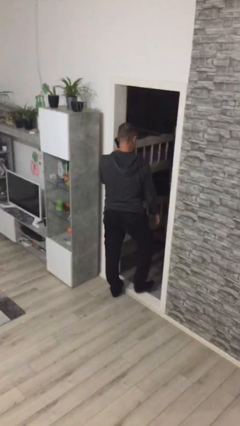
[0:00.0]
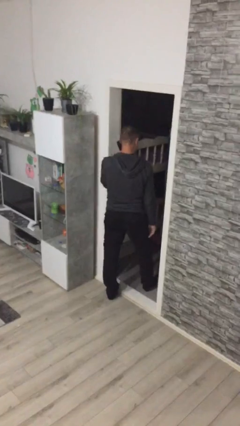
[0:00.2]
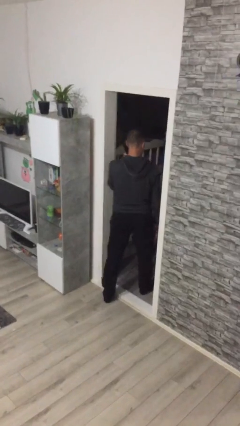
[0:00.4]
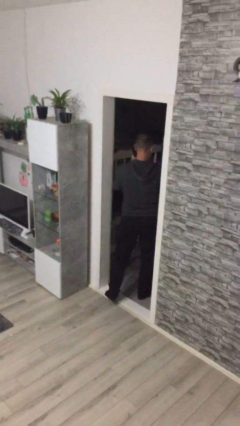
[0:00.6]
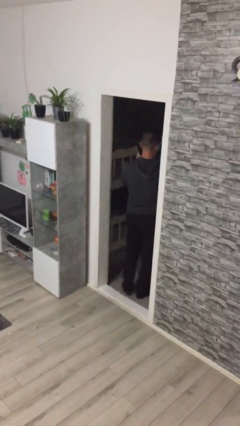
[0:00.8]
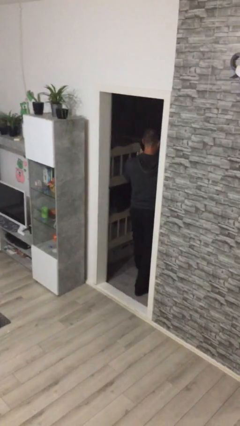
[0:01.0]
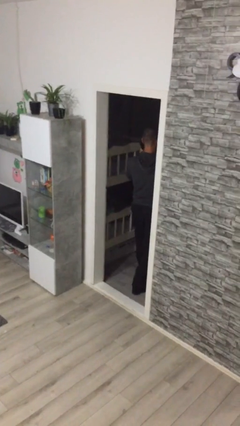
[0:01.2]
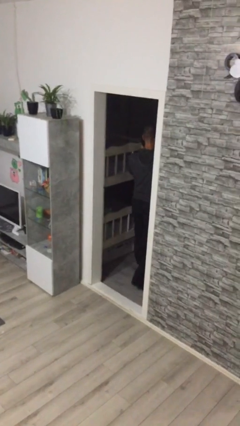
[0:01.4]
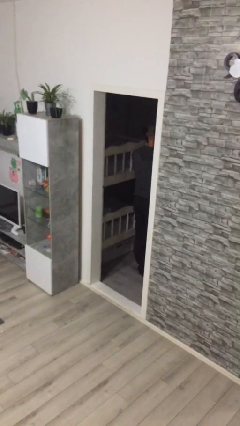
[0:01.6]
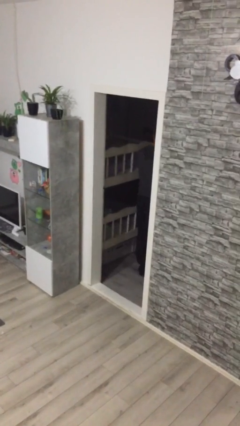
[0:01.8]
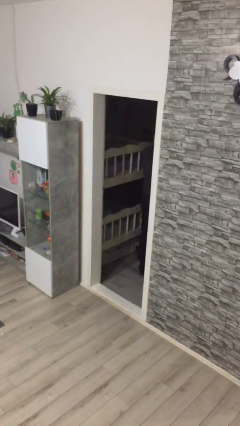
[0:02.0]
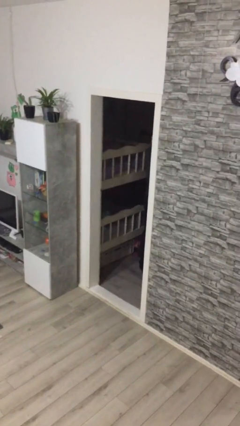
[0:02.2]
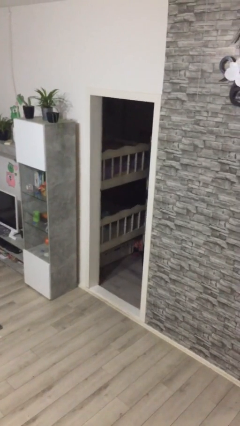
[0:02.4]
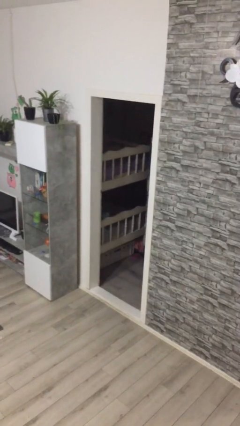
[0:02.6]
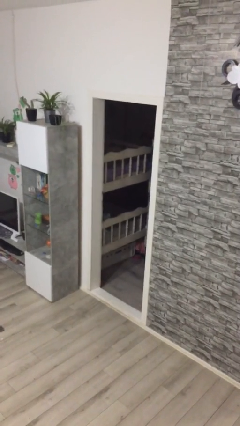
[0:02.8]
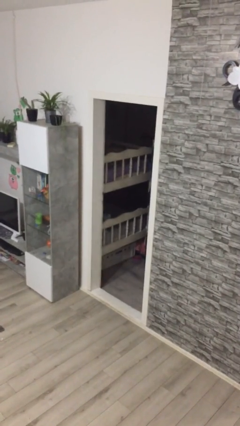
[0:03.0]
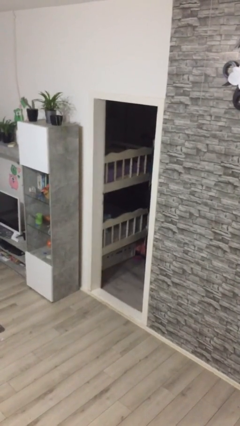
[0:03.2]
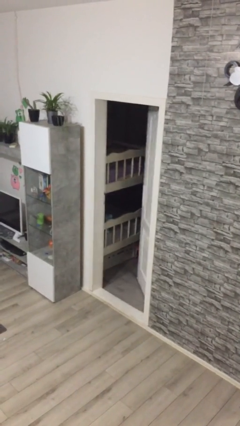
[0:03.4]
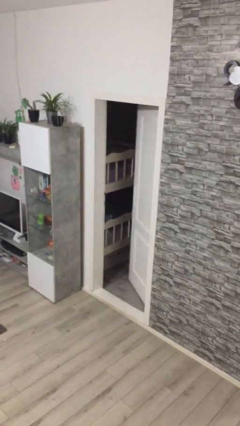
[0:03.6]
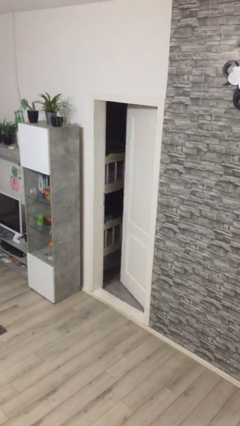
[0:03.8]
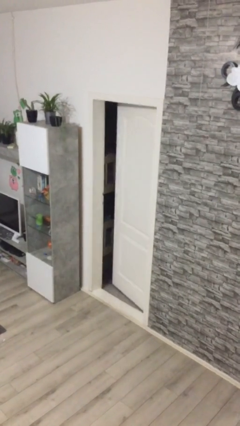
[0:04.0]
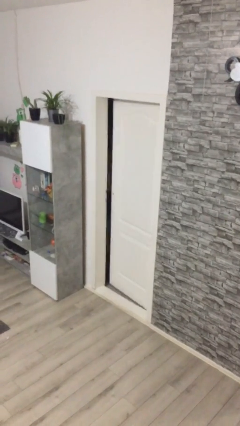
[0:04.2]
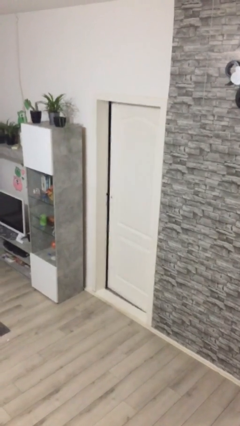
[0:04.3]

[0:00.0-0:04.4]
person exits scene through structure

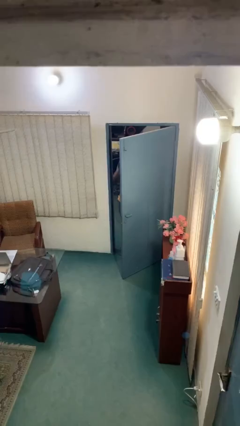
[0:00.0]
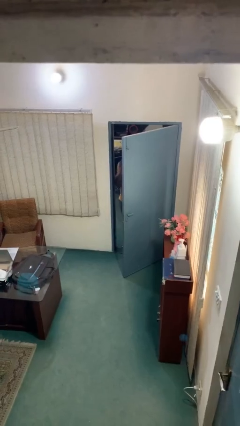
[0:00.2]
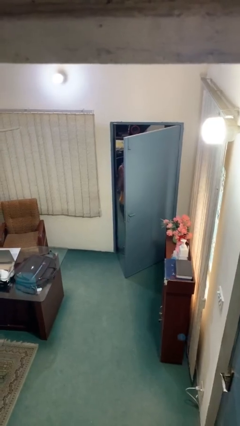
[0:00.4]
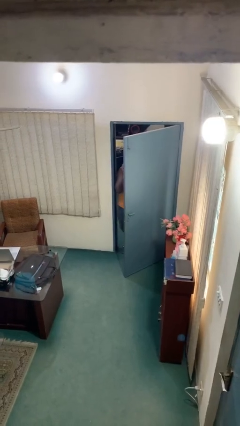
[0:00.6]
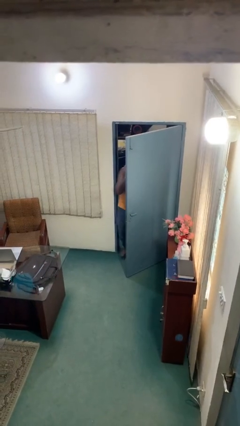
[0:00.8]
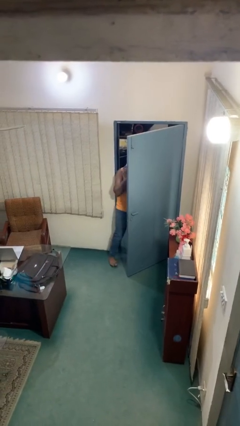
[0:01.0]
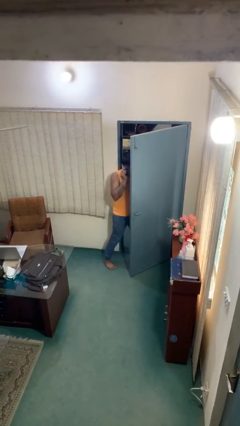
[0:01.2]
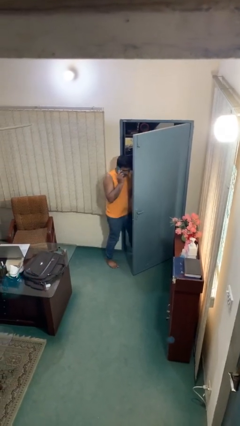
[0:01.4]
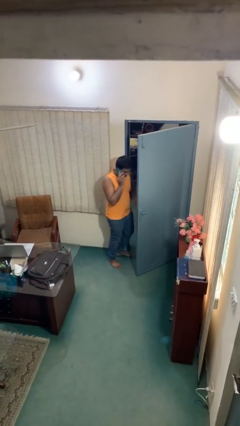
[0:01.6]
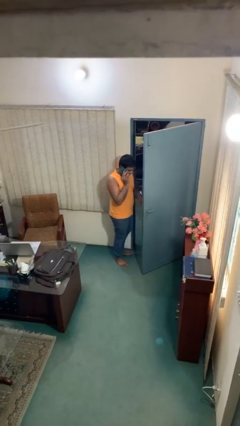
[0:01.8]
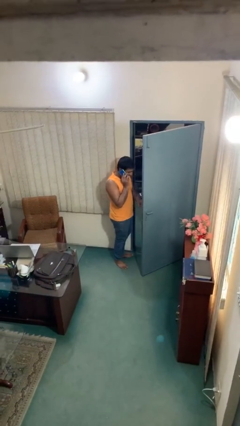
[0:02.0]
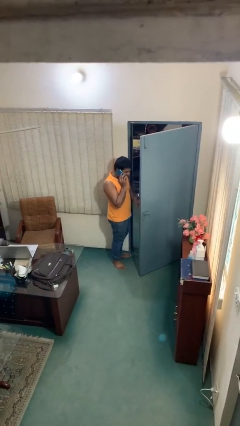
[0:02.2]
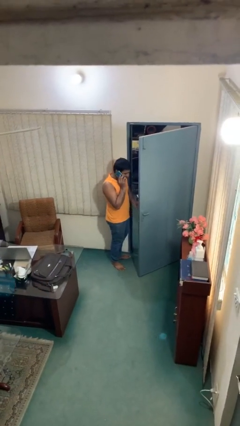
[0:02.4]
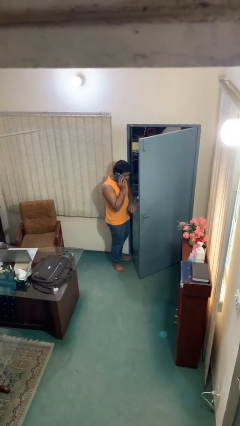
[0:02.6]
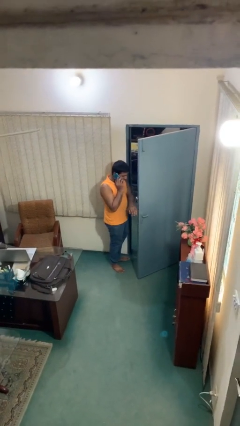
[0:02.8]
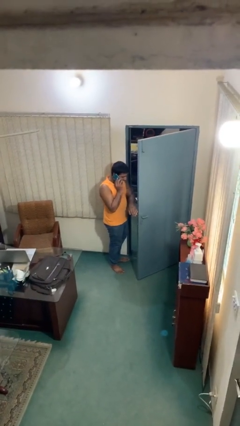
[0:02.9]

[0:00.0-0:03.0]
person enters scene through structure

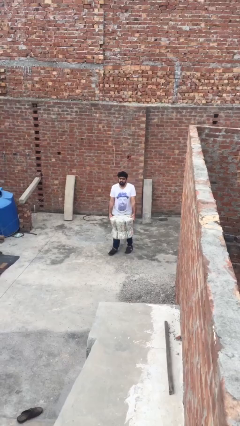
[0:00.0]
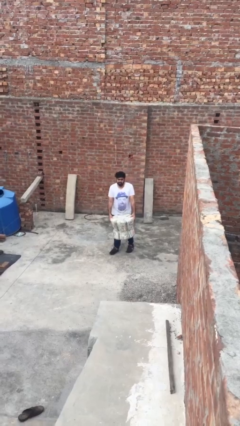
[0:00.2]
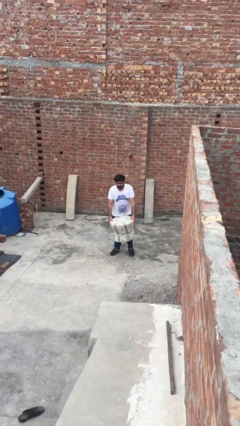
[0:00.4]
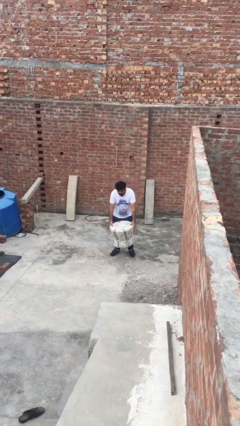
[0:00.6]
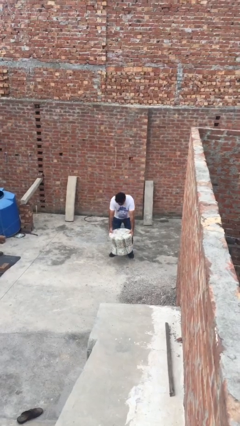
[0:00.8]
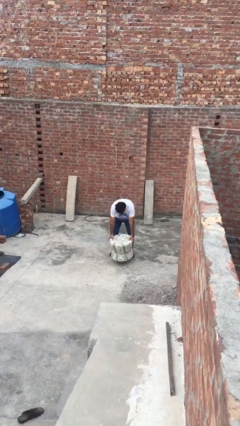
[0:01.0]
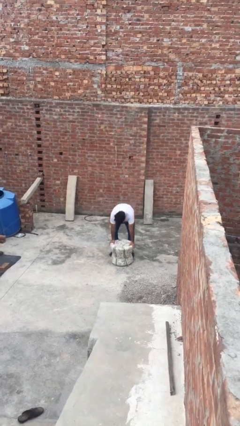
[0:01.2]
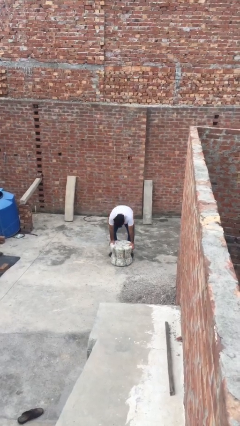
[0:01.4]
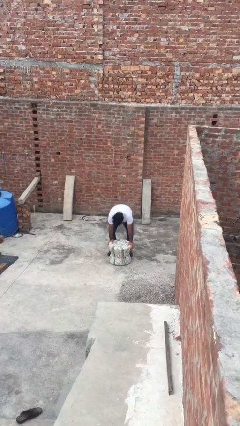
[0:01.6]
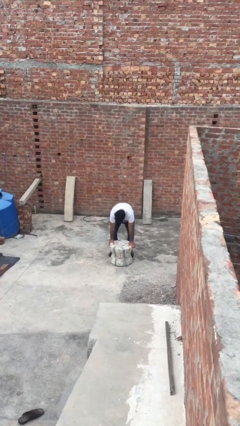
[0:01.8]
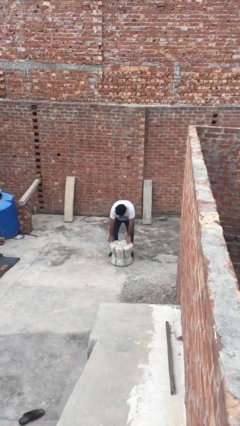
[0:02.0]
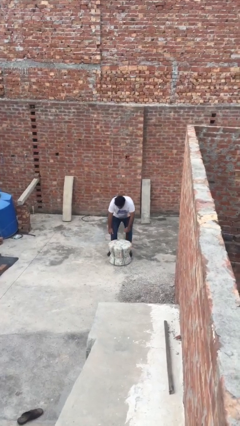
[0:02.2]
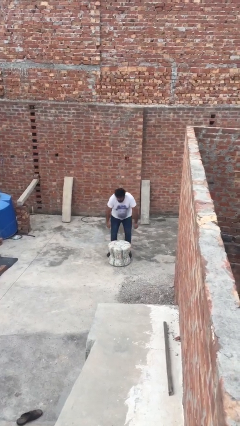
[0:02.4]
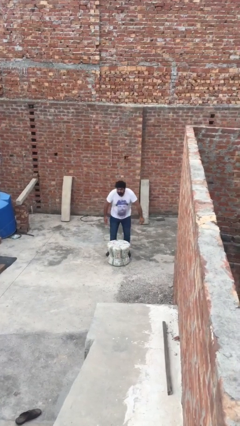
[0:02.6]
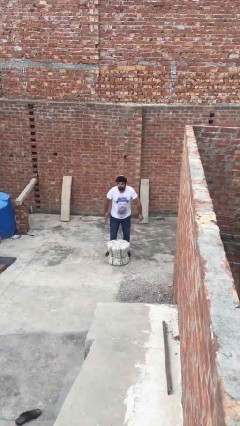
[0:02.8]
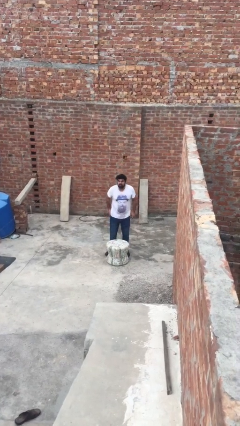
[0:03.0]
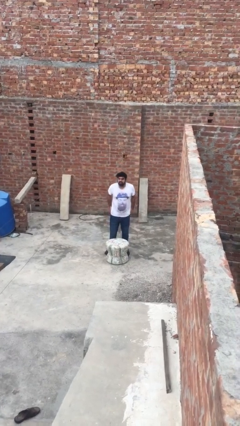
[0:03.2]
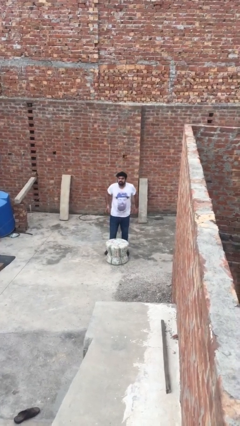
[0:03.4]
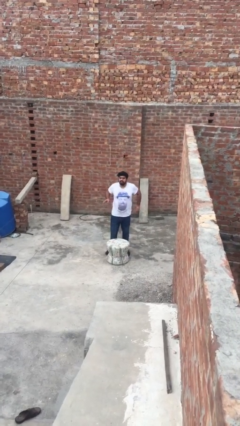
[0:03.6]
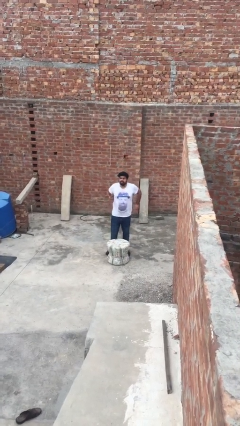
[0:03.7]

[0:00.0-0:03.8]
person puts down object on floor

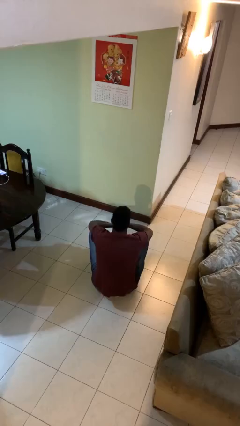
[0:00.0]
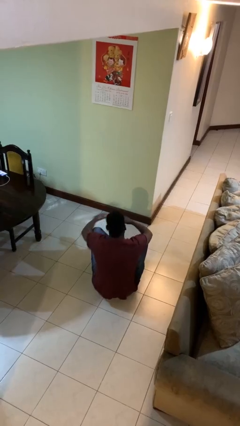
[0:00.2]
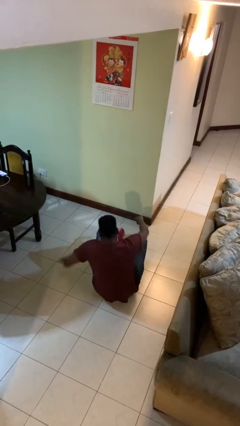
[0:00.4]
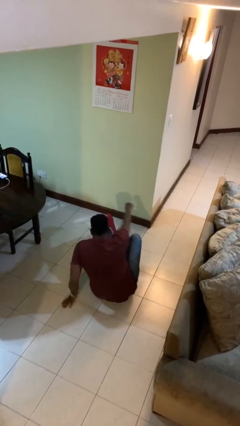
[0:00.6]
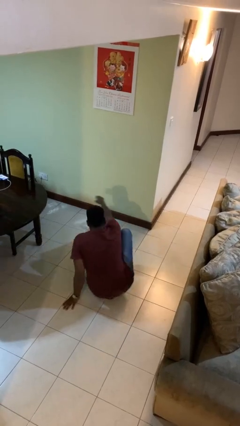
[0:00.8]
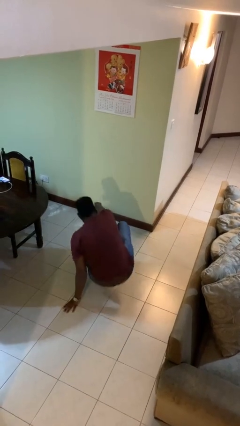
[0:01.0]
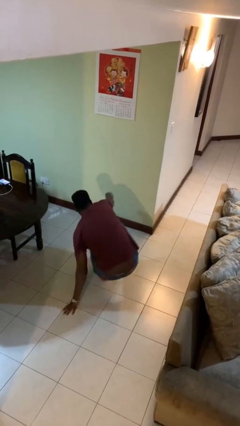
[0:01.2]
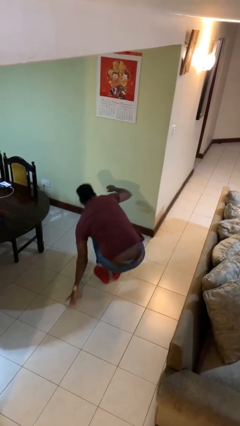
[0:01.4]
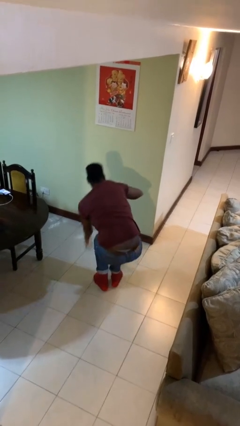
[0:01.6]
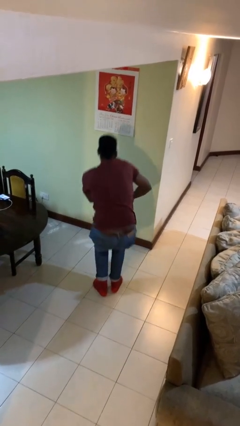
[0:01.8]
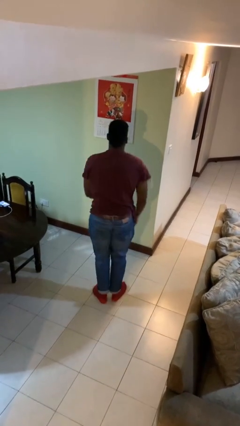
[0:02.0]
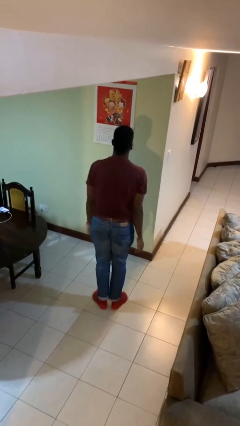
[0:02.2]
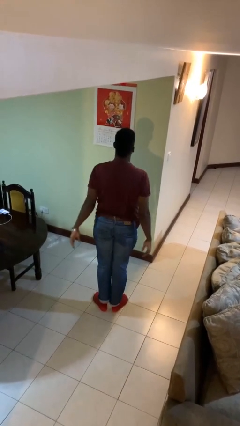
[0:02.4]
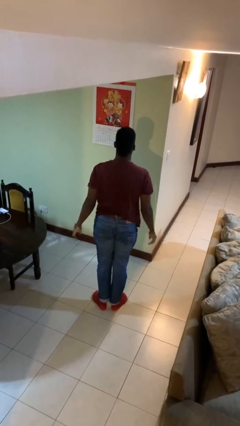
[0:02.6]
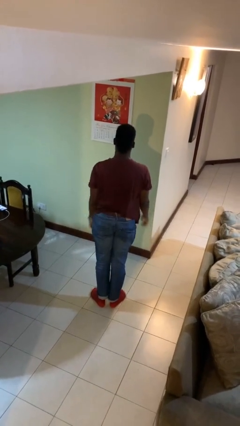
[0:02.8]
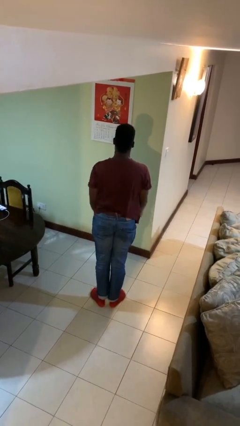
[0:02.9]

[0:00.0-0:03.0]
person stands up from floor

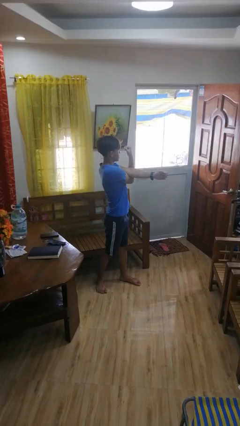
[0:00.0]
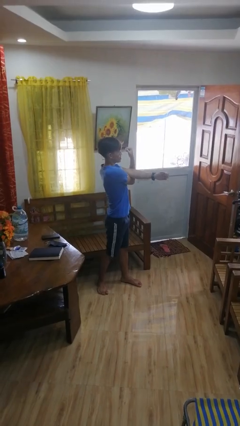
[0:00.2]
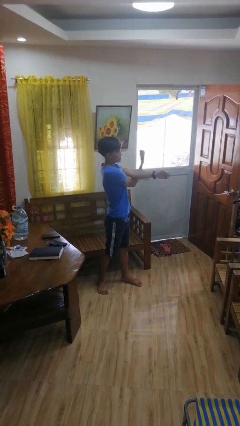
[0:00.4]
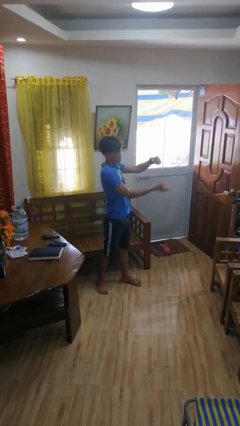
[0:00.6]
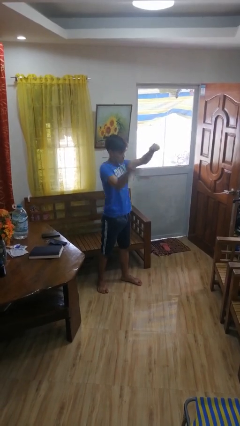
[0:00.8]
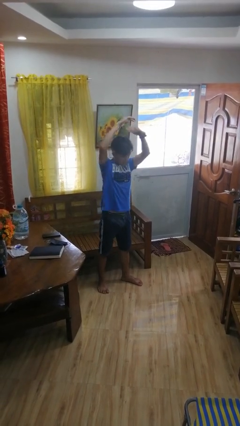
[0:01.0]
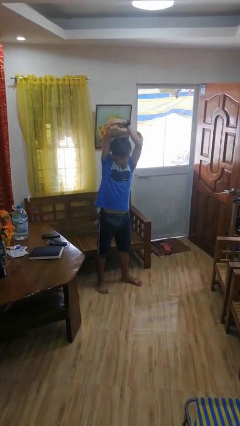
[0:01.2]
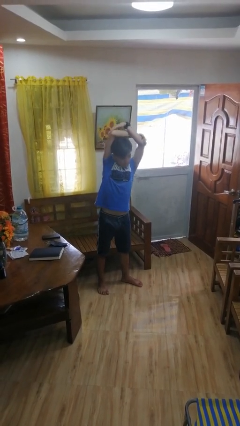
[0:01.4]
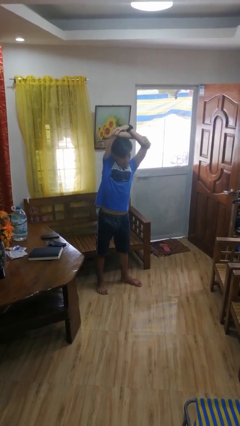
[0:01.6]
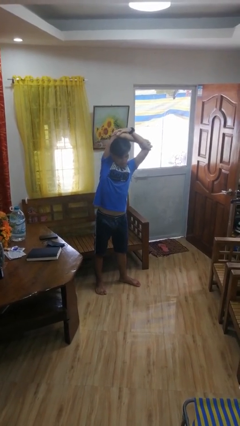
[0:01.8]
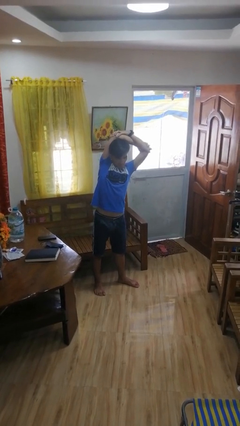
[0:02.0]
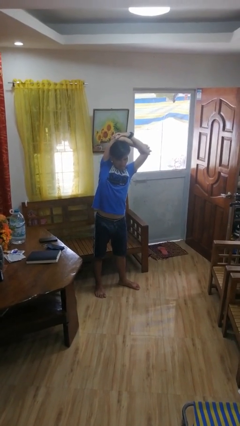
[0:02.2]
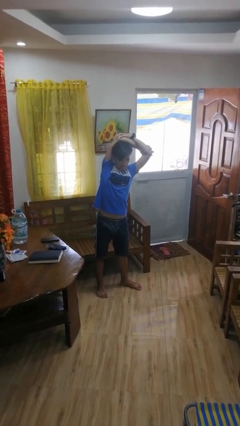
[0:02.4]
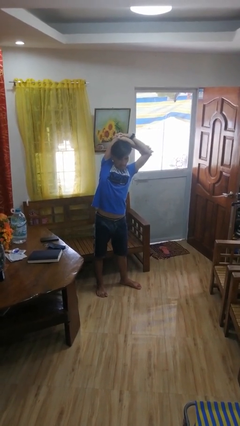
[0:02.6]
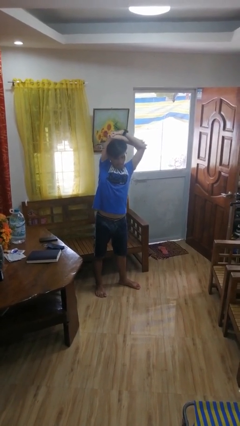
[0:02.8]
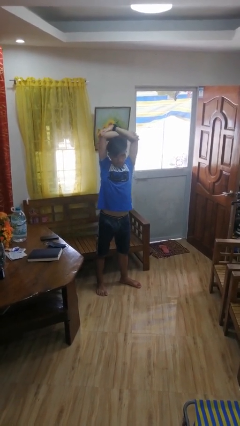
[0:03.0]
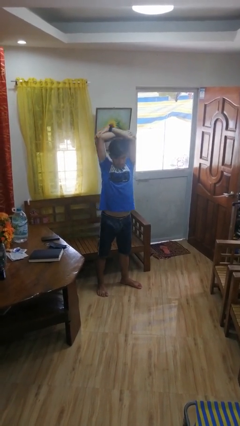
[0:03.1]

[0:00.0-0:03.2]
person stretches arms over head
